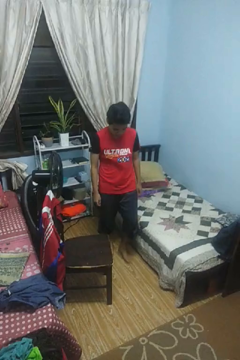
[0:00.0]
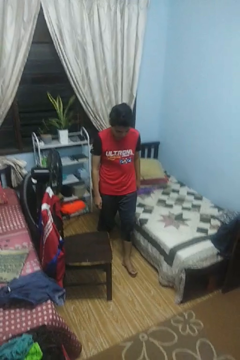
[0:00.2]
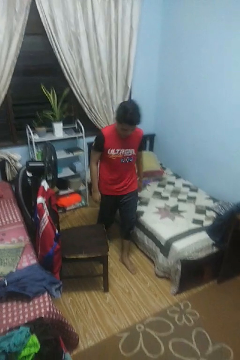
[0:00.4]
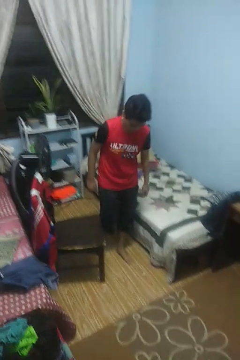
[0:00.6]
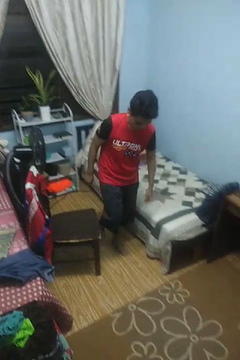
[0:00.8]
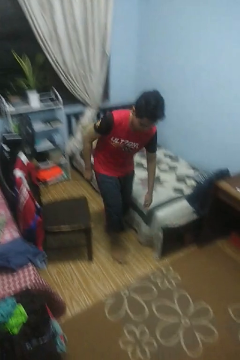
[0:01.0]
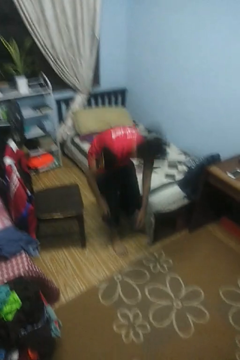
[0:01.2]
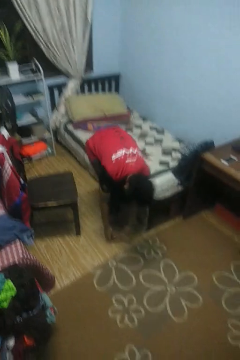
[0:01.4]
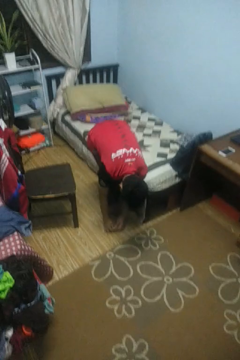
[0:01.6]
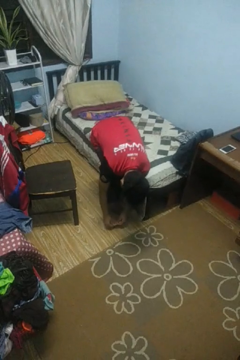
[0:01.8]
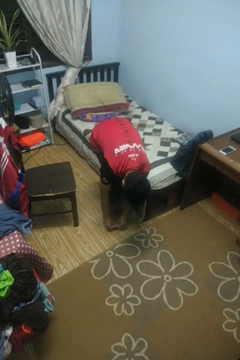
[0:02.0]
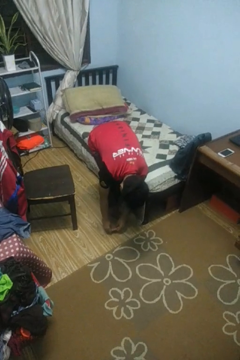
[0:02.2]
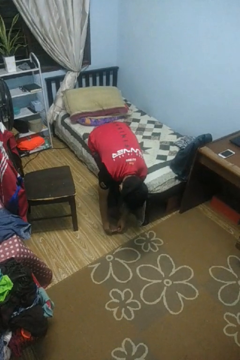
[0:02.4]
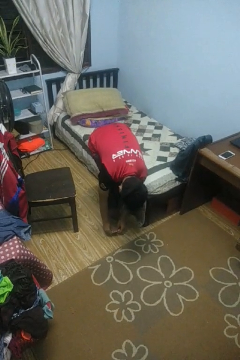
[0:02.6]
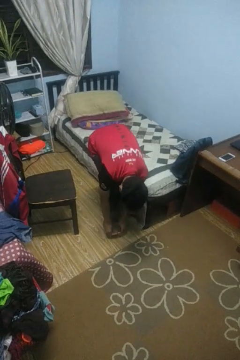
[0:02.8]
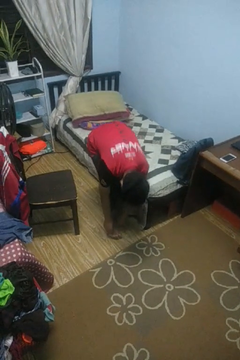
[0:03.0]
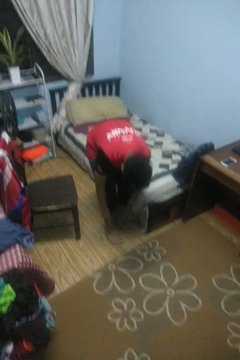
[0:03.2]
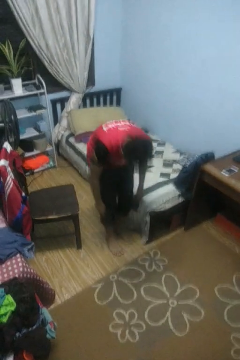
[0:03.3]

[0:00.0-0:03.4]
person stubs toe

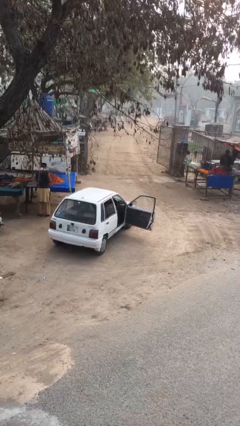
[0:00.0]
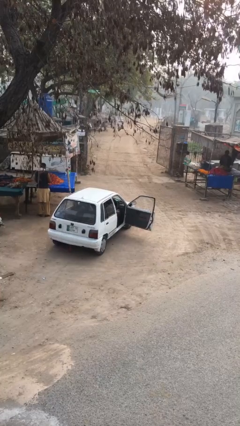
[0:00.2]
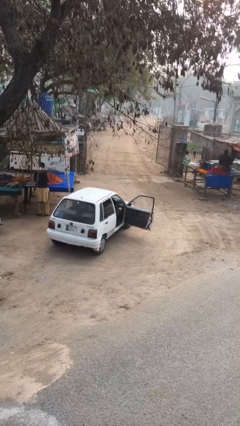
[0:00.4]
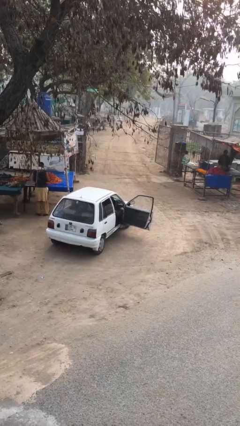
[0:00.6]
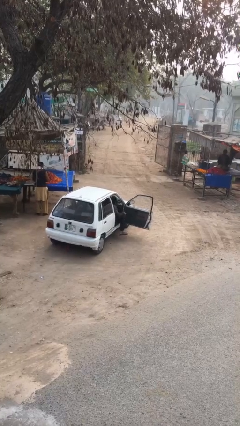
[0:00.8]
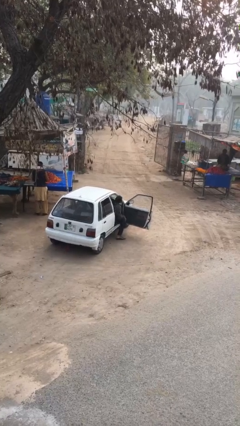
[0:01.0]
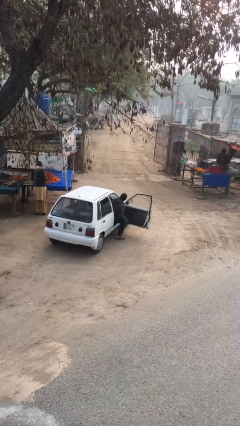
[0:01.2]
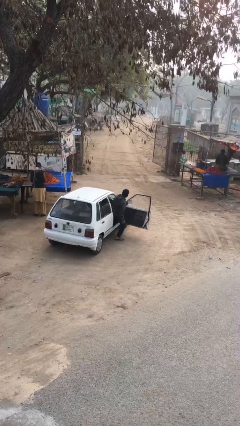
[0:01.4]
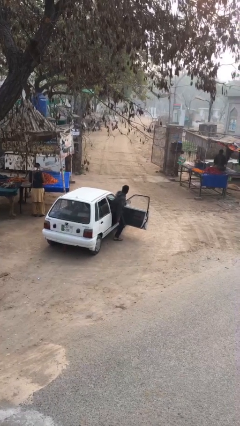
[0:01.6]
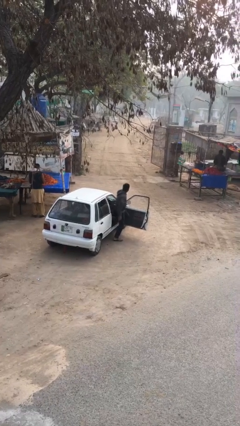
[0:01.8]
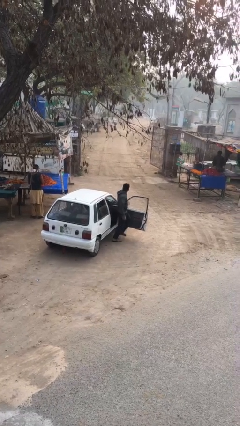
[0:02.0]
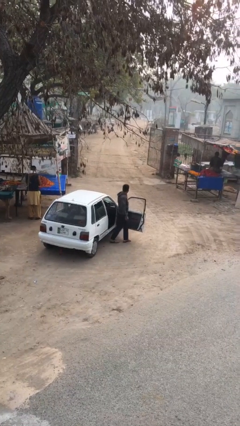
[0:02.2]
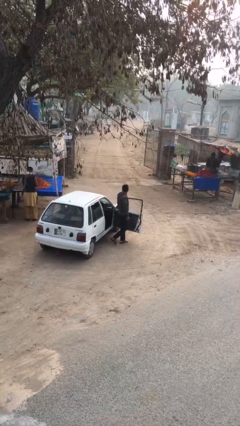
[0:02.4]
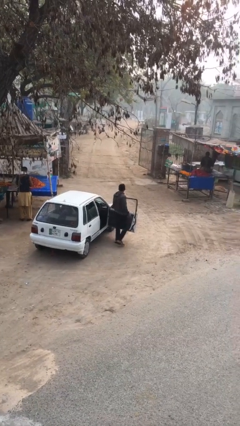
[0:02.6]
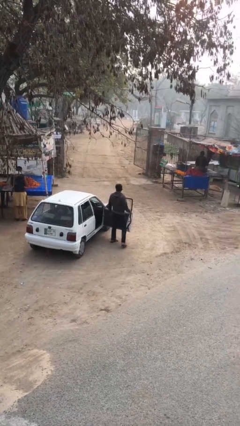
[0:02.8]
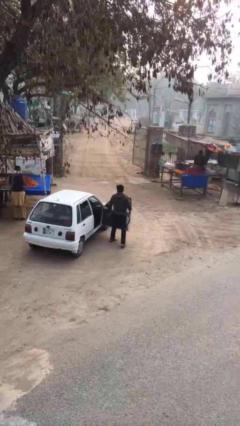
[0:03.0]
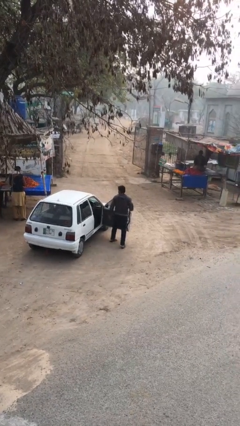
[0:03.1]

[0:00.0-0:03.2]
person exits car

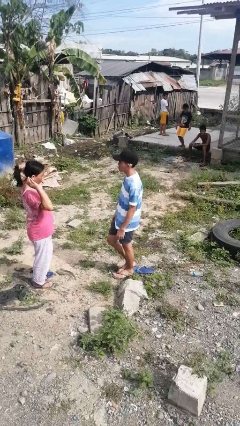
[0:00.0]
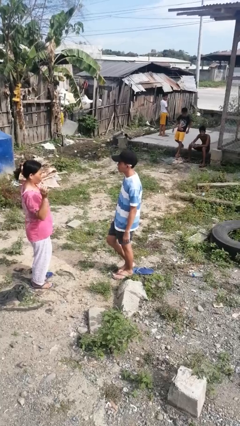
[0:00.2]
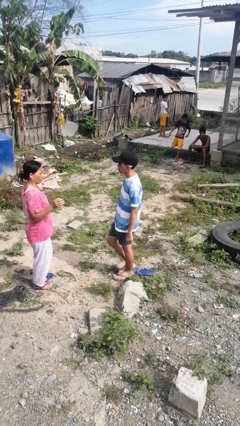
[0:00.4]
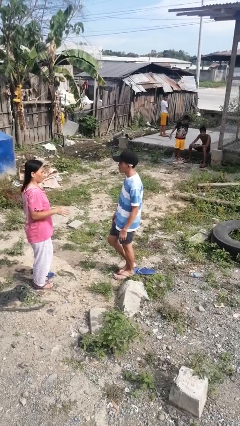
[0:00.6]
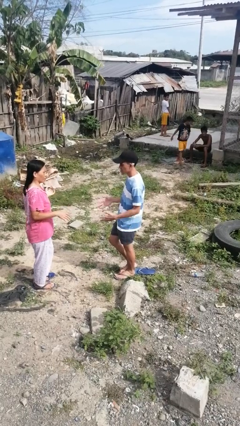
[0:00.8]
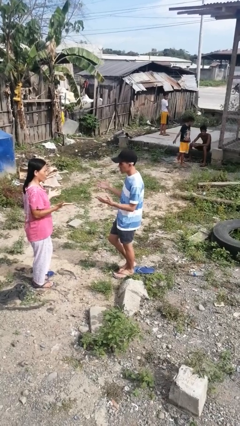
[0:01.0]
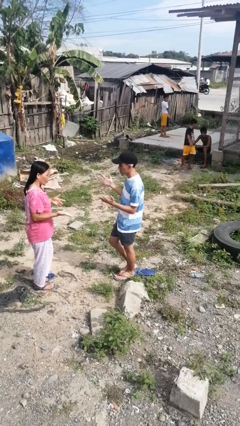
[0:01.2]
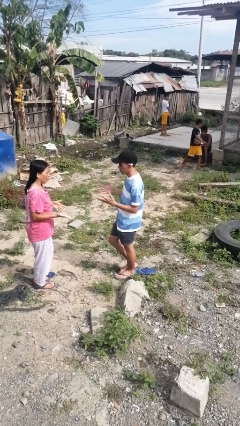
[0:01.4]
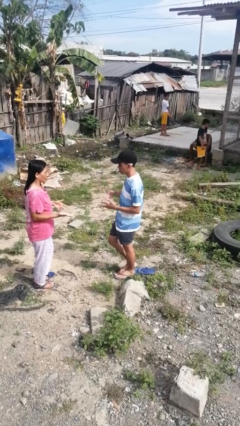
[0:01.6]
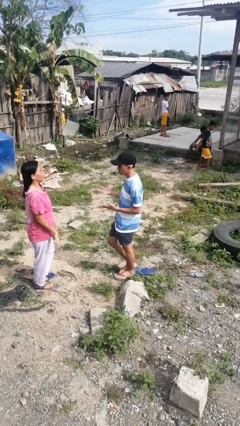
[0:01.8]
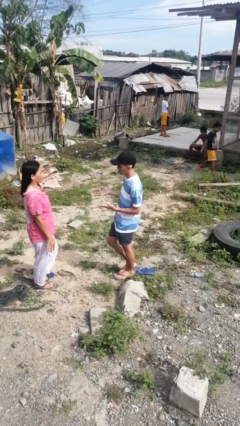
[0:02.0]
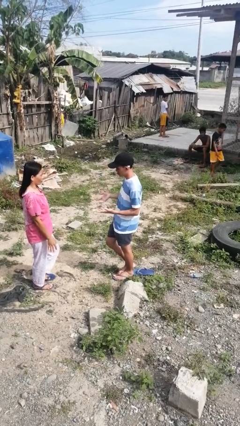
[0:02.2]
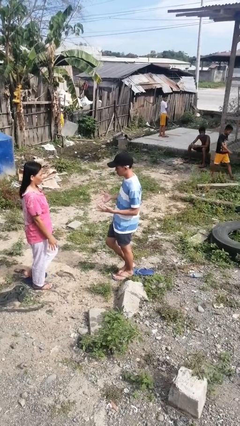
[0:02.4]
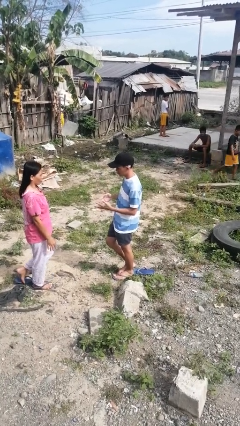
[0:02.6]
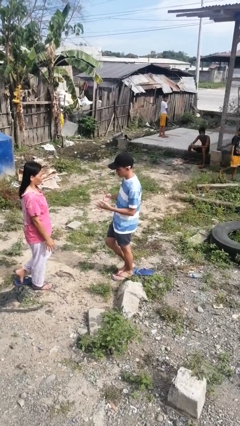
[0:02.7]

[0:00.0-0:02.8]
person talks to person

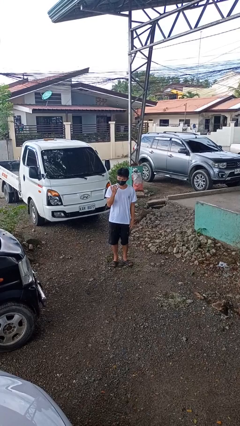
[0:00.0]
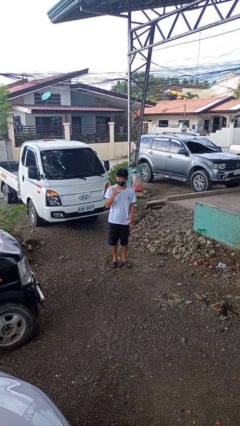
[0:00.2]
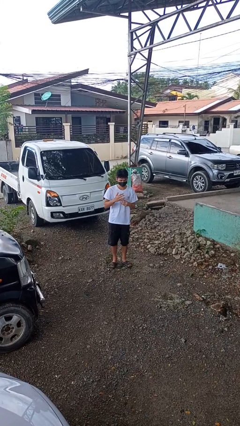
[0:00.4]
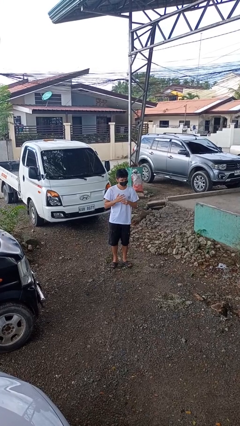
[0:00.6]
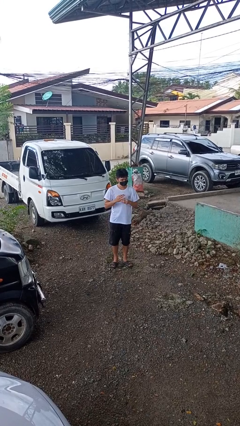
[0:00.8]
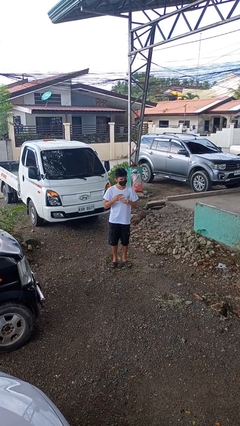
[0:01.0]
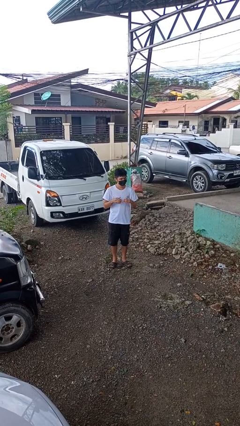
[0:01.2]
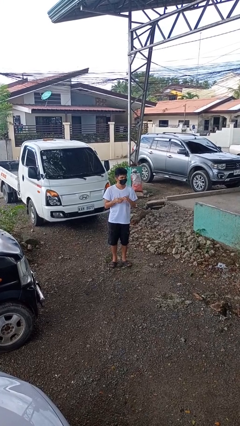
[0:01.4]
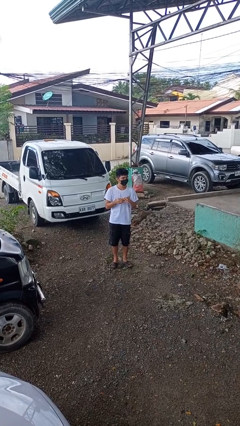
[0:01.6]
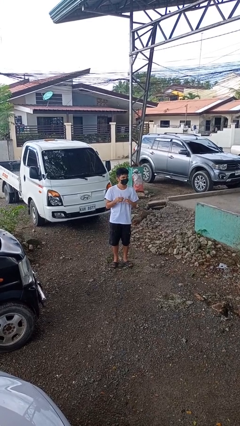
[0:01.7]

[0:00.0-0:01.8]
person takes off ring

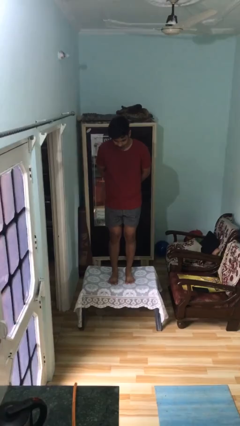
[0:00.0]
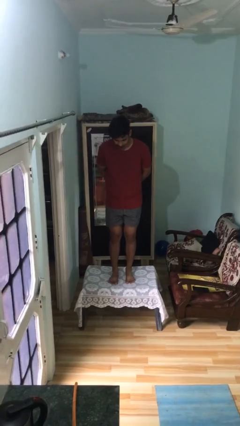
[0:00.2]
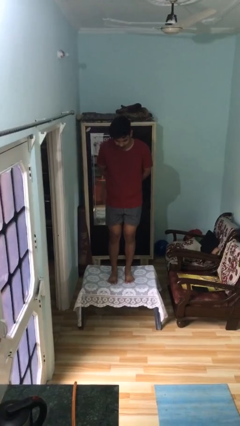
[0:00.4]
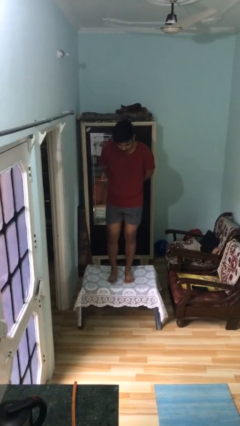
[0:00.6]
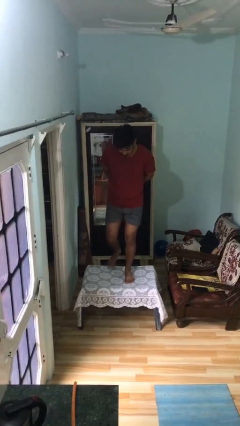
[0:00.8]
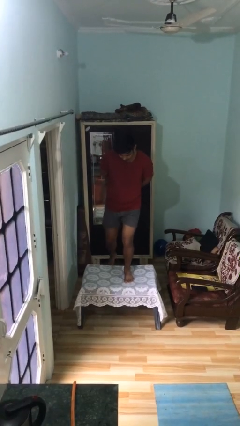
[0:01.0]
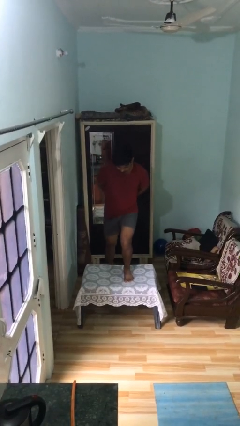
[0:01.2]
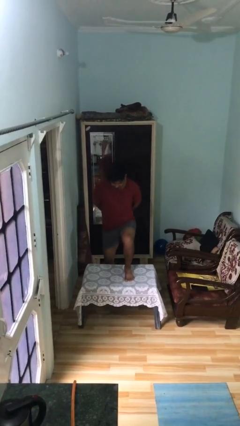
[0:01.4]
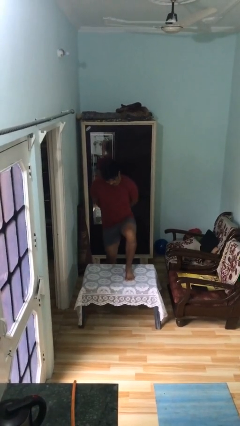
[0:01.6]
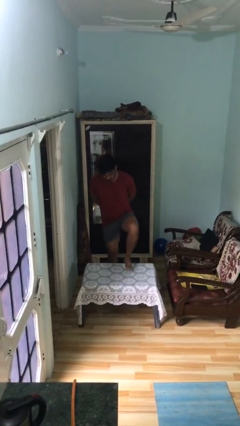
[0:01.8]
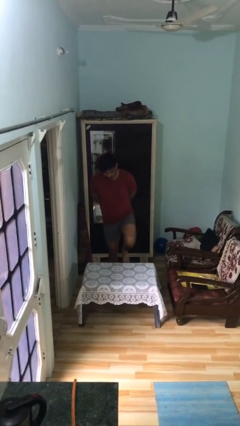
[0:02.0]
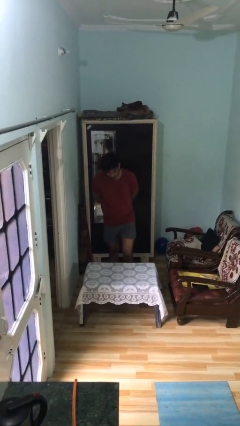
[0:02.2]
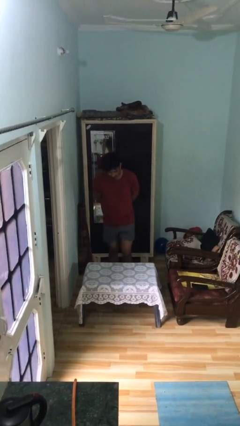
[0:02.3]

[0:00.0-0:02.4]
person climbs off table

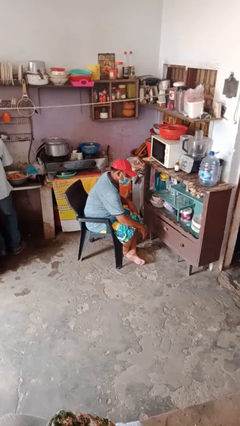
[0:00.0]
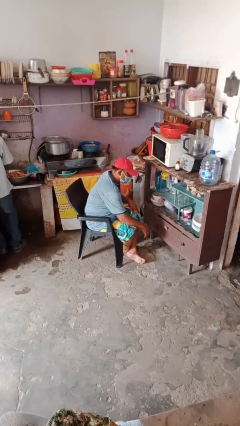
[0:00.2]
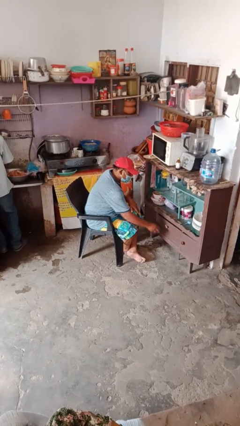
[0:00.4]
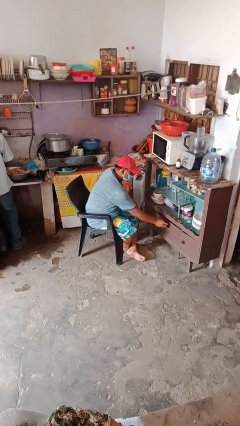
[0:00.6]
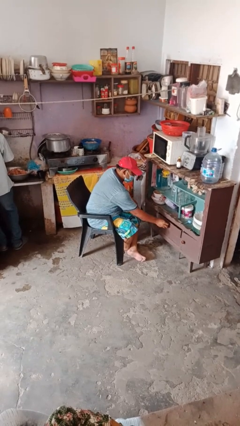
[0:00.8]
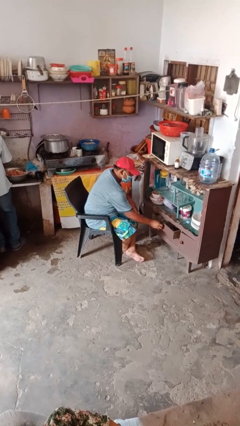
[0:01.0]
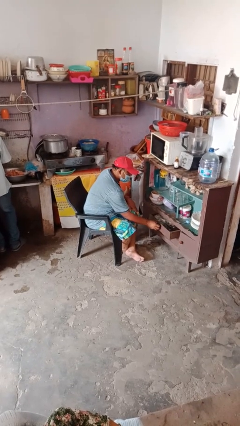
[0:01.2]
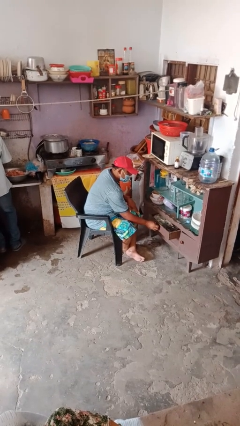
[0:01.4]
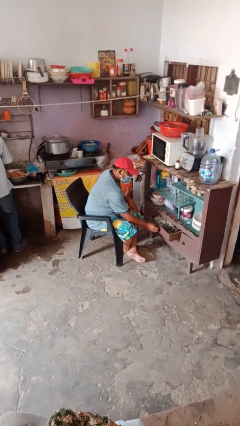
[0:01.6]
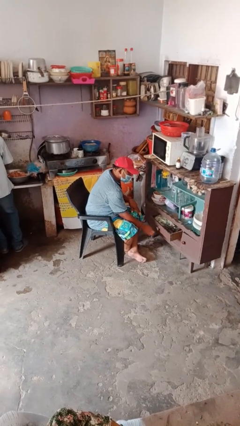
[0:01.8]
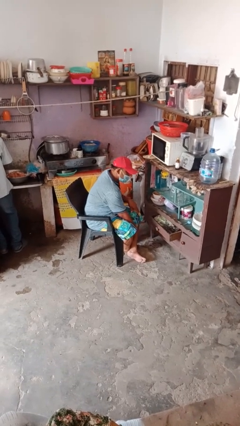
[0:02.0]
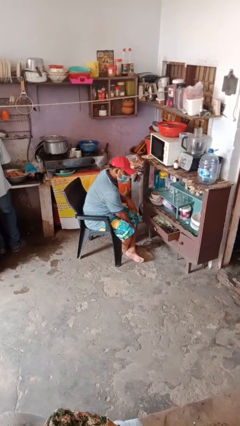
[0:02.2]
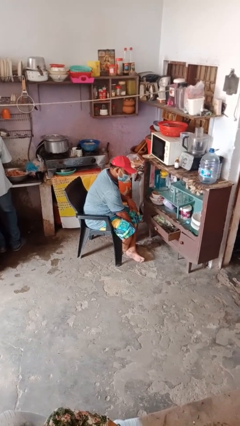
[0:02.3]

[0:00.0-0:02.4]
person opens dresser drawer

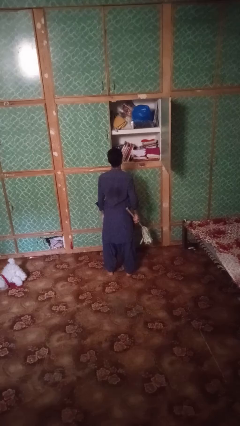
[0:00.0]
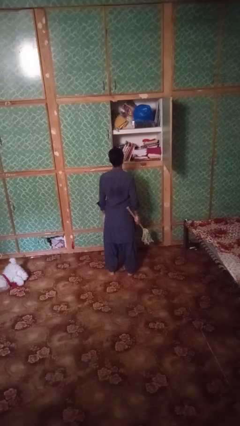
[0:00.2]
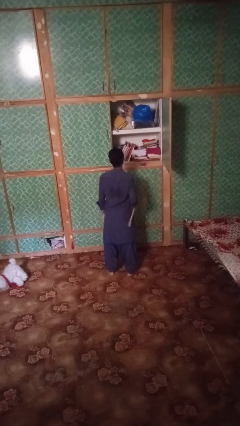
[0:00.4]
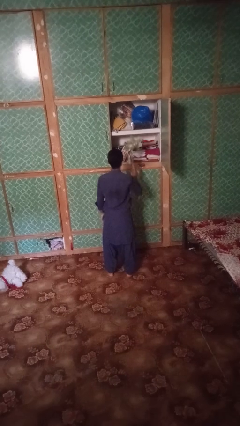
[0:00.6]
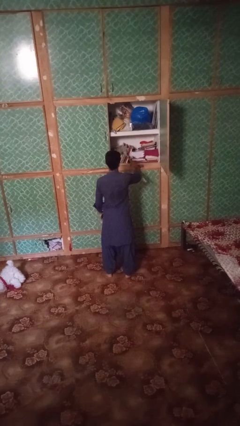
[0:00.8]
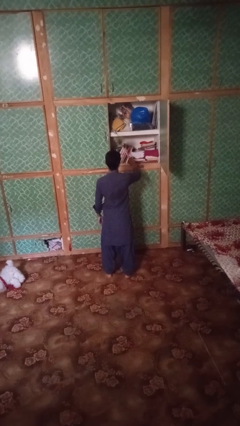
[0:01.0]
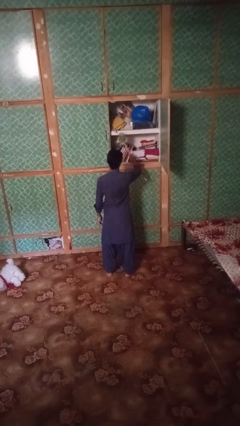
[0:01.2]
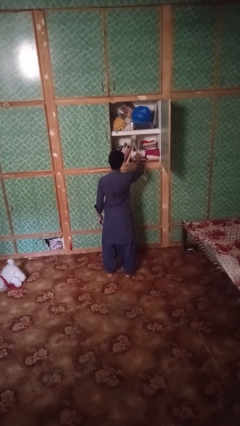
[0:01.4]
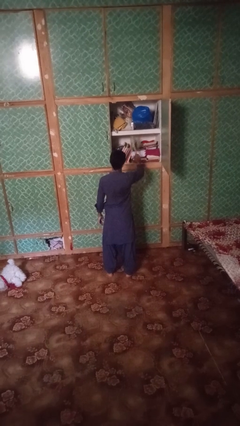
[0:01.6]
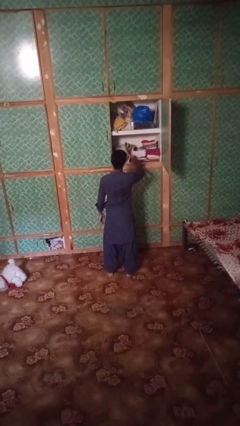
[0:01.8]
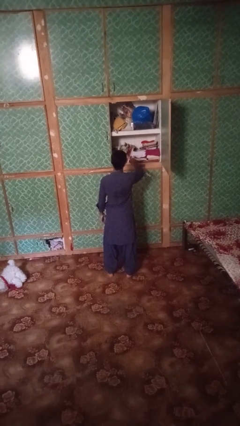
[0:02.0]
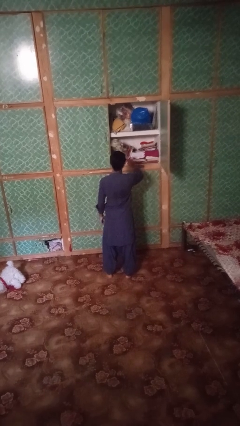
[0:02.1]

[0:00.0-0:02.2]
person dusts furniture
